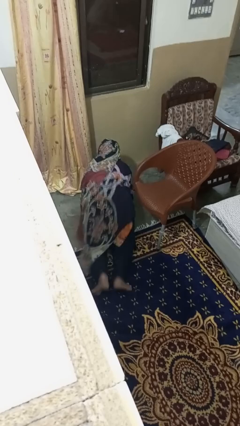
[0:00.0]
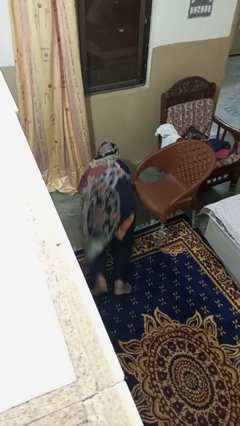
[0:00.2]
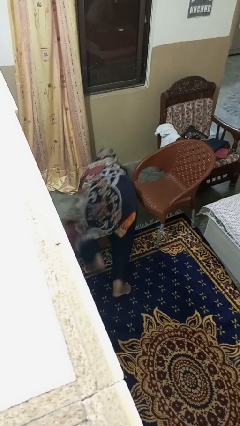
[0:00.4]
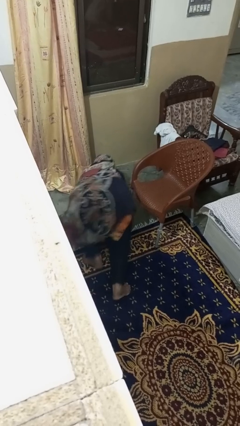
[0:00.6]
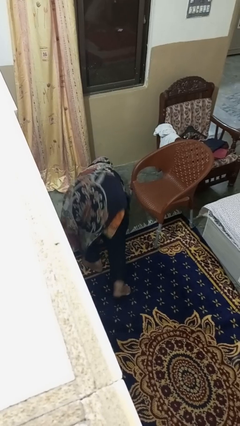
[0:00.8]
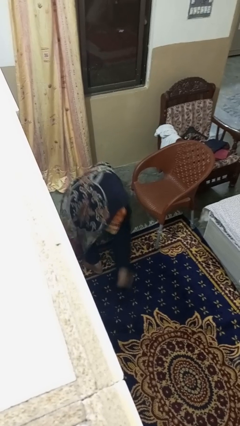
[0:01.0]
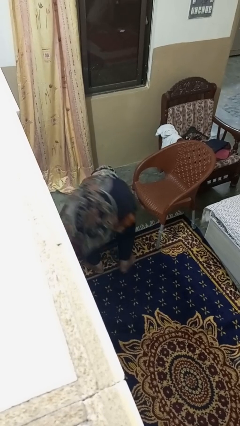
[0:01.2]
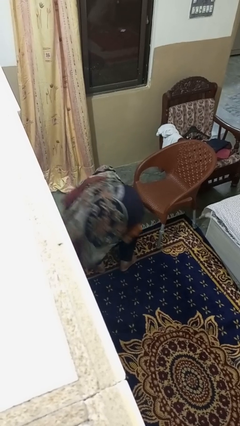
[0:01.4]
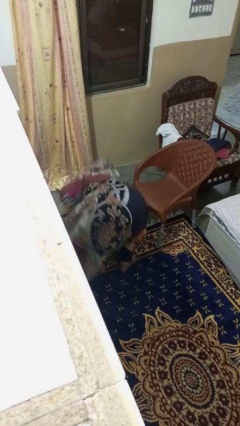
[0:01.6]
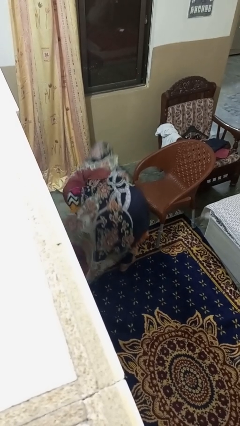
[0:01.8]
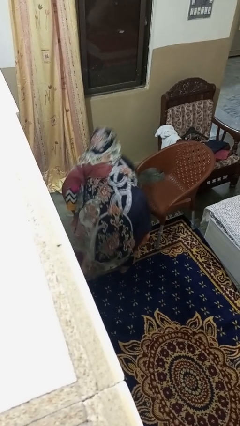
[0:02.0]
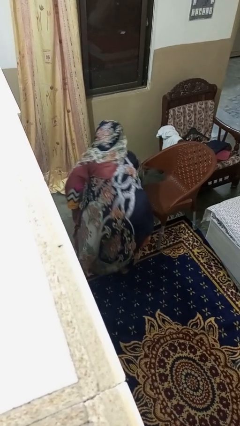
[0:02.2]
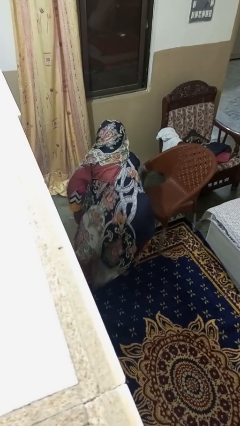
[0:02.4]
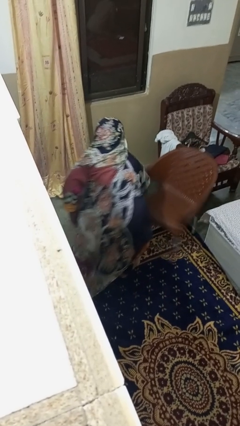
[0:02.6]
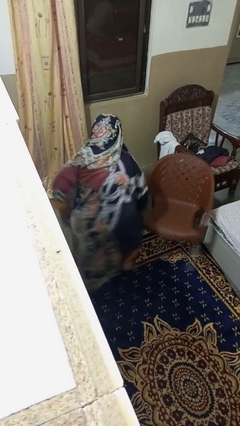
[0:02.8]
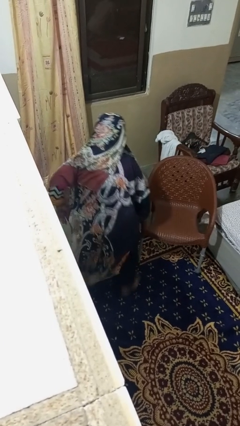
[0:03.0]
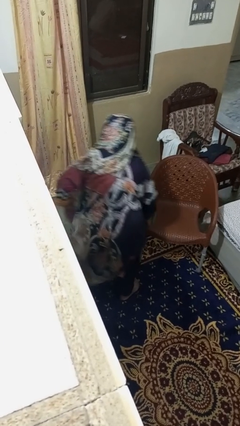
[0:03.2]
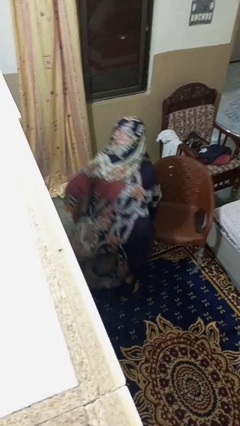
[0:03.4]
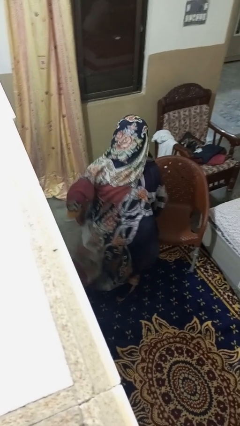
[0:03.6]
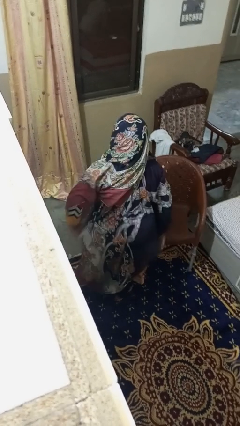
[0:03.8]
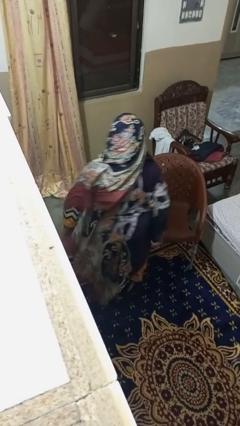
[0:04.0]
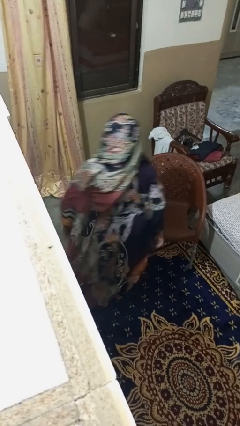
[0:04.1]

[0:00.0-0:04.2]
person stands up from floor

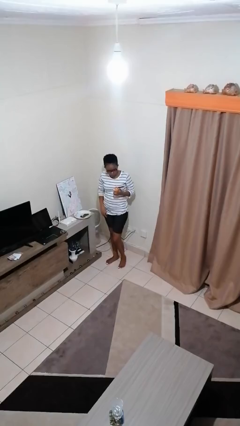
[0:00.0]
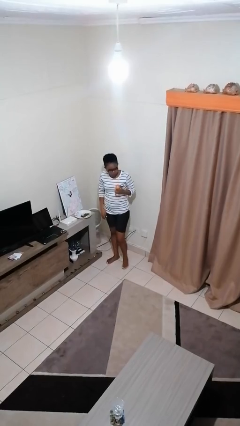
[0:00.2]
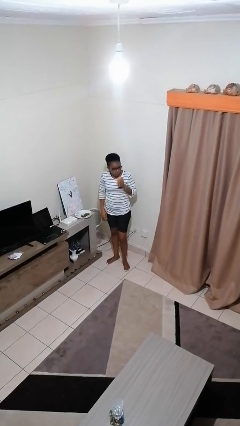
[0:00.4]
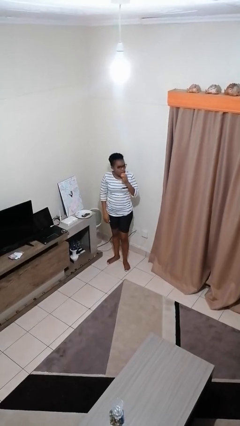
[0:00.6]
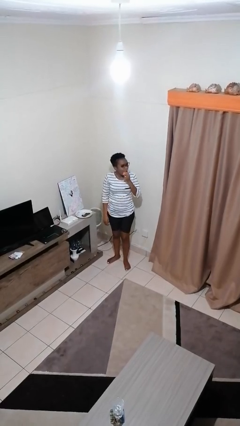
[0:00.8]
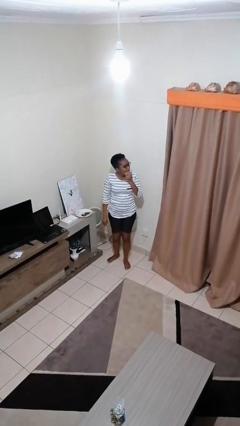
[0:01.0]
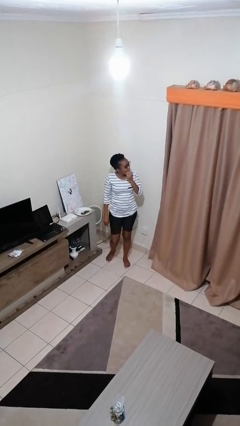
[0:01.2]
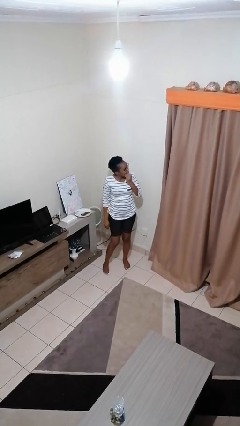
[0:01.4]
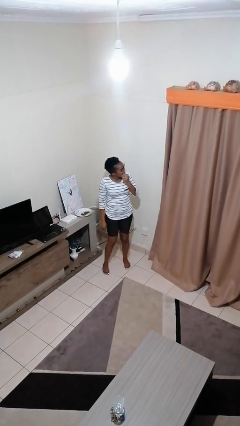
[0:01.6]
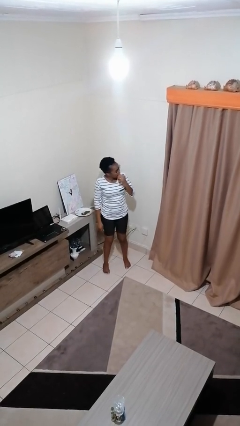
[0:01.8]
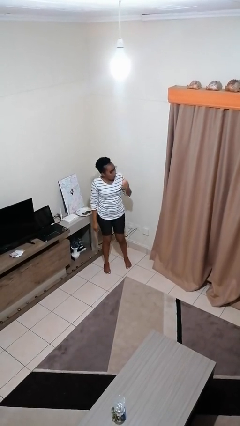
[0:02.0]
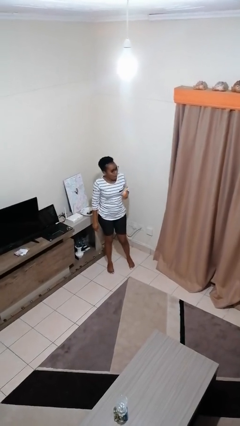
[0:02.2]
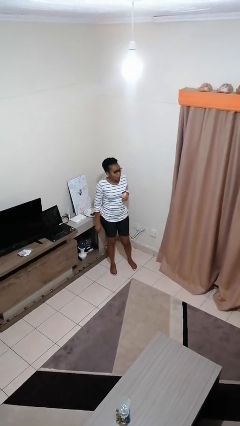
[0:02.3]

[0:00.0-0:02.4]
person eats apple

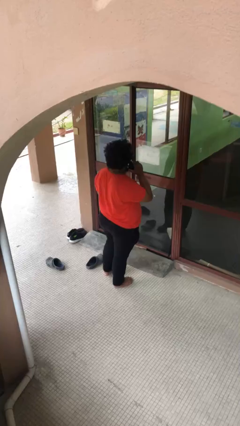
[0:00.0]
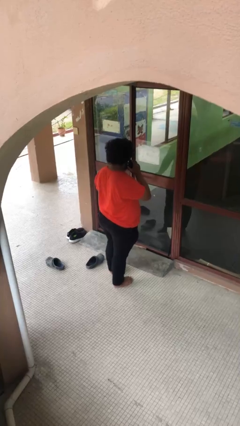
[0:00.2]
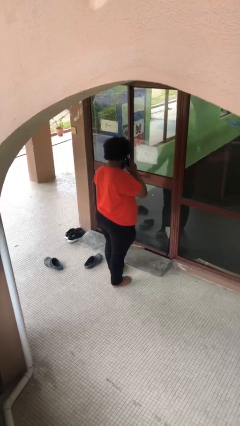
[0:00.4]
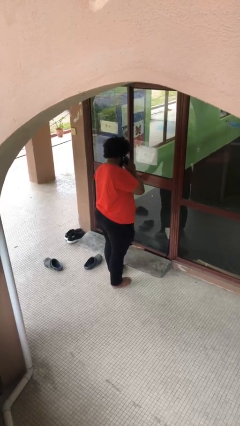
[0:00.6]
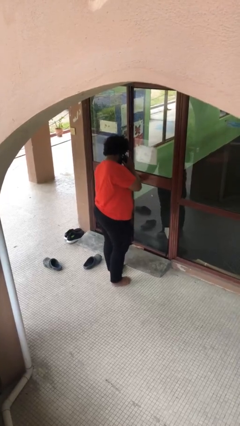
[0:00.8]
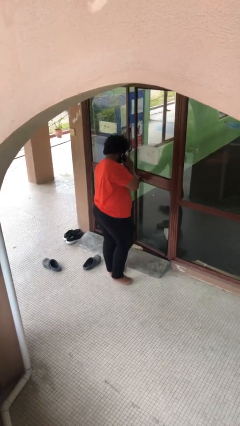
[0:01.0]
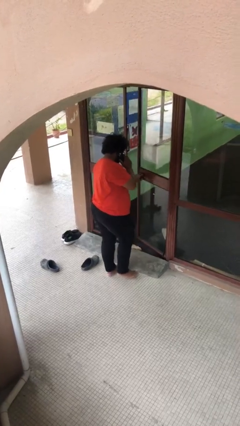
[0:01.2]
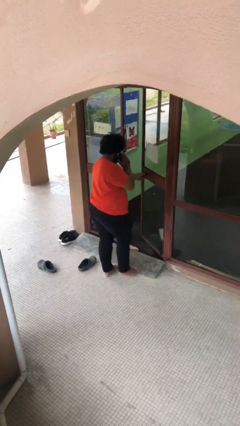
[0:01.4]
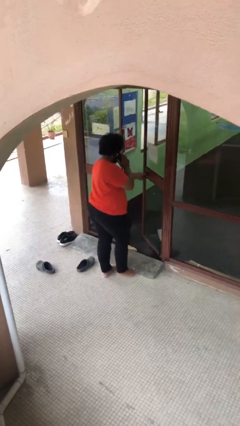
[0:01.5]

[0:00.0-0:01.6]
person opens facility door

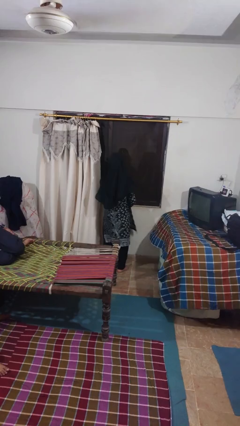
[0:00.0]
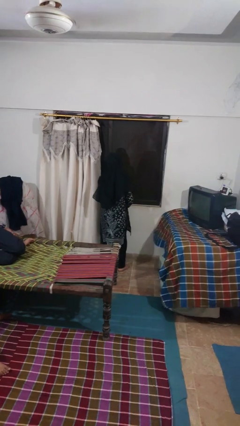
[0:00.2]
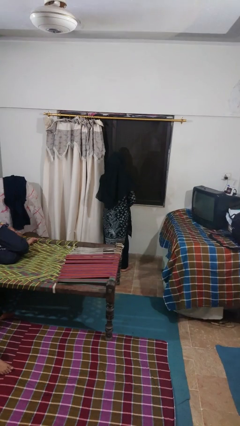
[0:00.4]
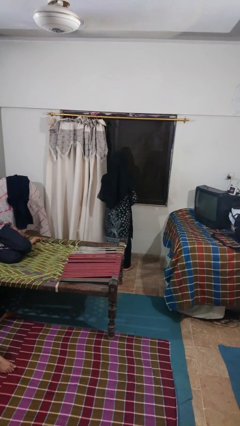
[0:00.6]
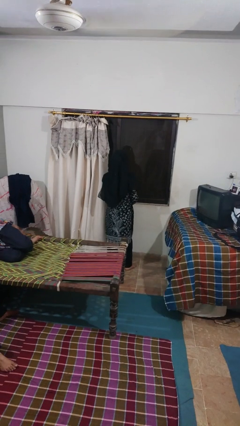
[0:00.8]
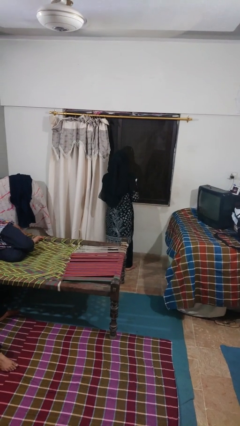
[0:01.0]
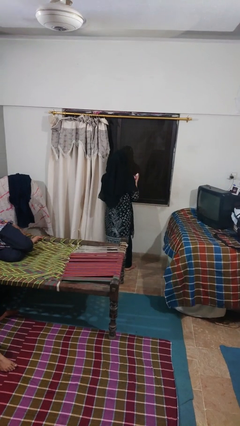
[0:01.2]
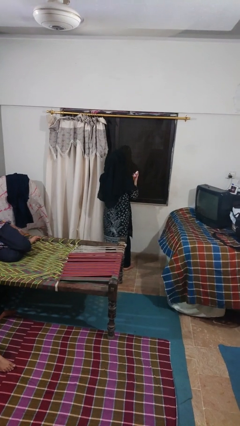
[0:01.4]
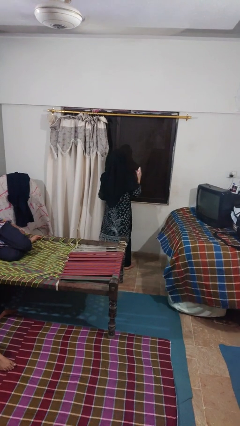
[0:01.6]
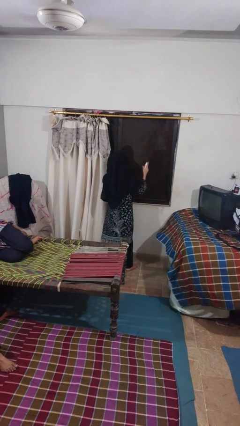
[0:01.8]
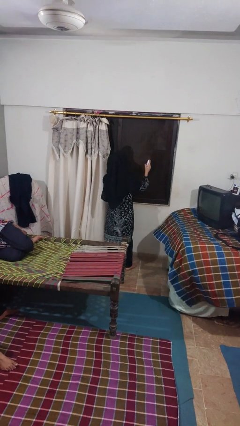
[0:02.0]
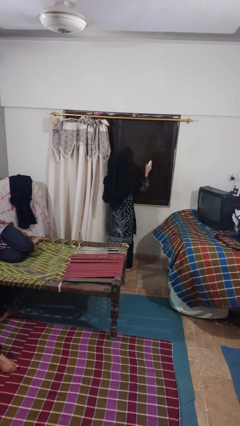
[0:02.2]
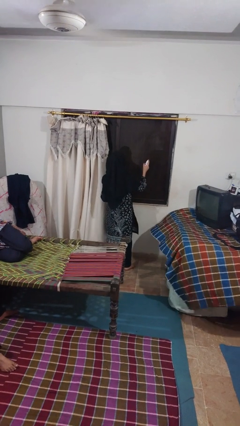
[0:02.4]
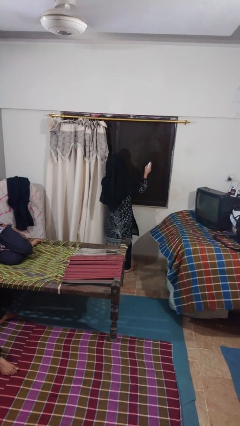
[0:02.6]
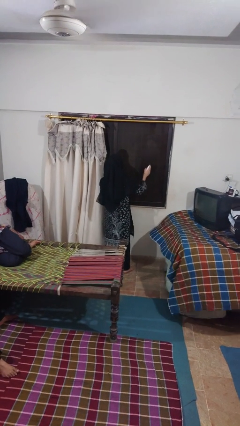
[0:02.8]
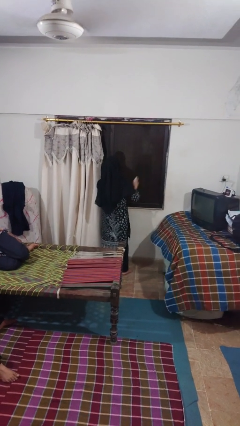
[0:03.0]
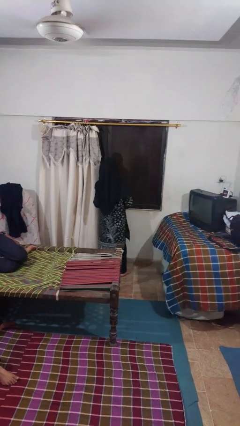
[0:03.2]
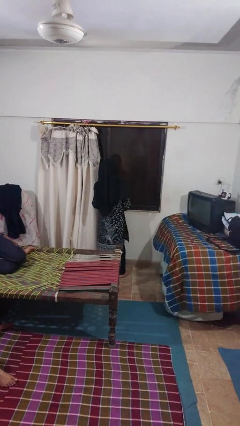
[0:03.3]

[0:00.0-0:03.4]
person sprays from bottle

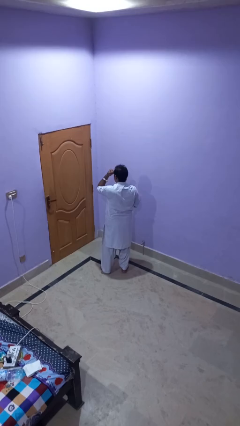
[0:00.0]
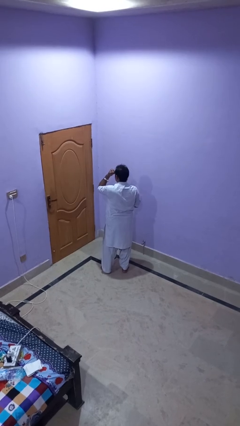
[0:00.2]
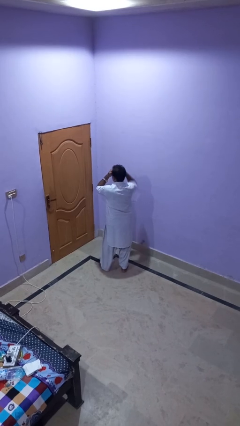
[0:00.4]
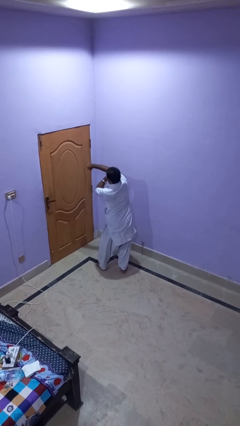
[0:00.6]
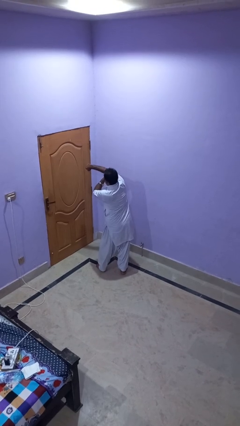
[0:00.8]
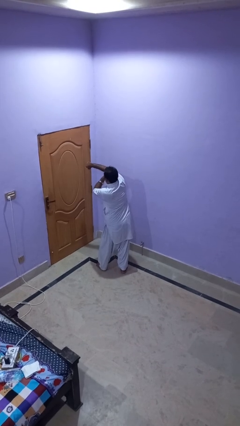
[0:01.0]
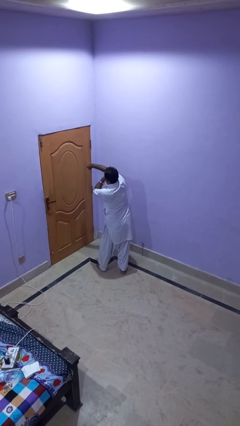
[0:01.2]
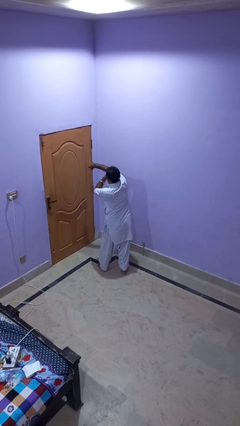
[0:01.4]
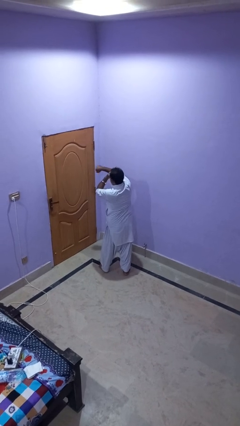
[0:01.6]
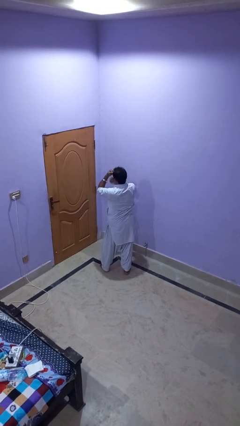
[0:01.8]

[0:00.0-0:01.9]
person punches

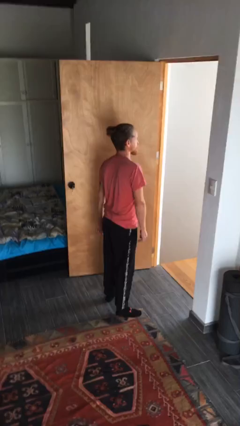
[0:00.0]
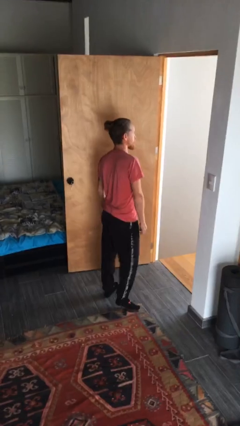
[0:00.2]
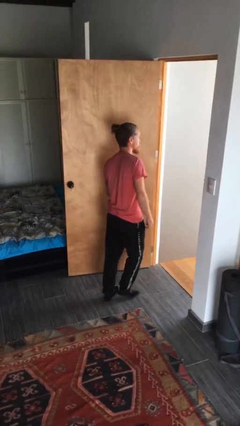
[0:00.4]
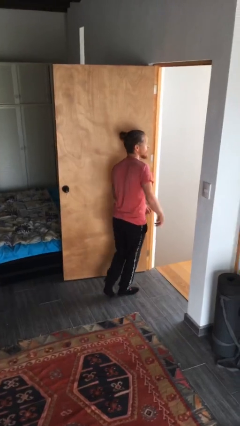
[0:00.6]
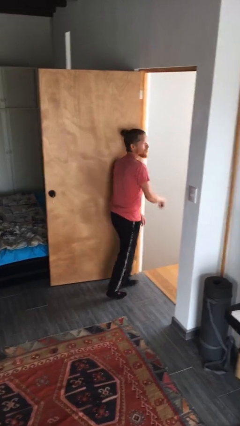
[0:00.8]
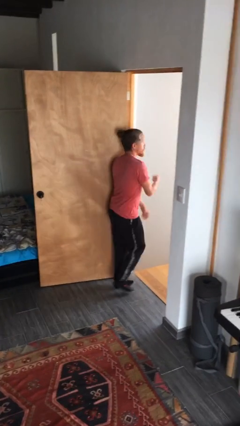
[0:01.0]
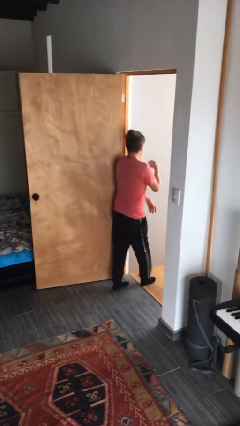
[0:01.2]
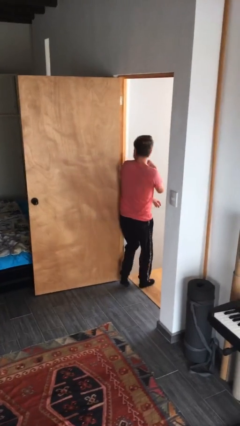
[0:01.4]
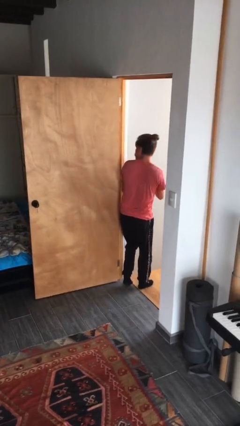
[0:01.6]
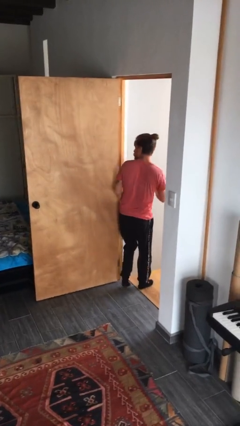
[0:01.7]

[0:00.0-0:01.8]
person bumps into wall

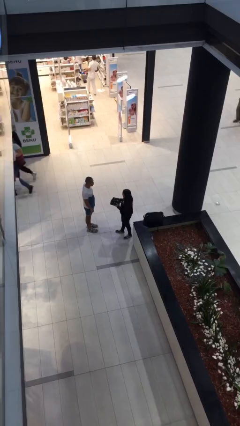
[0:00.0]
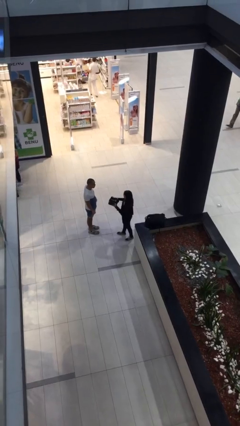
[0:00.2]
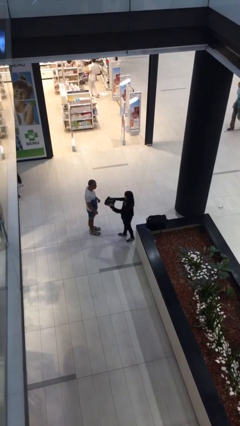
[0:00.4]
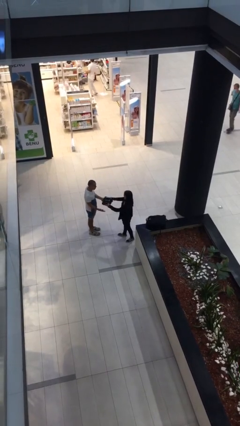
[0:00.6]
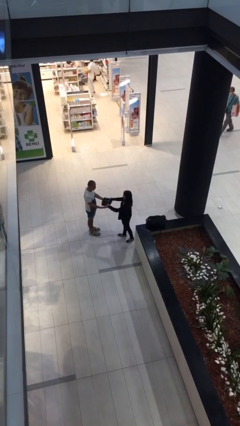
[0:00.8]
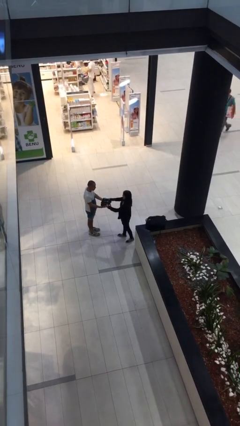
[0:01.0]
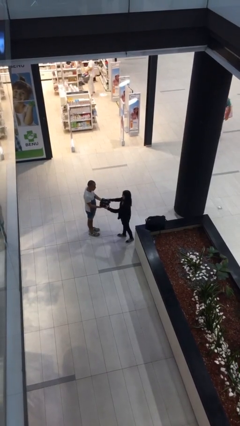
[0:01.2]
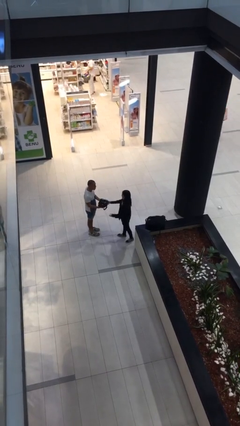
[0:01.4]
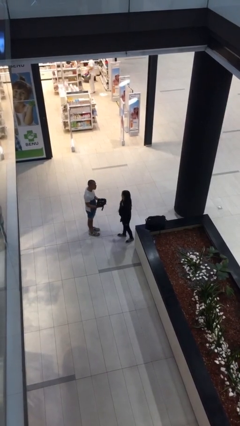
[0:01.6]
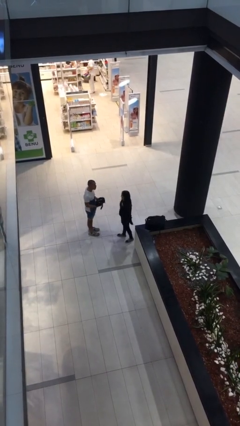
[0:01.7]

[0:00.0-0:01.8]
person transfers object to person
